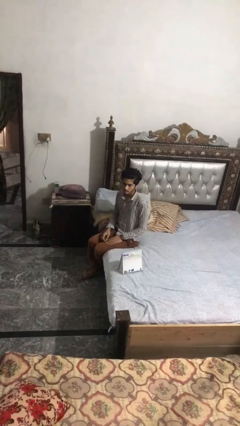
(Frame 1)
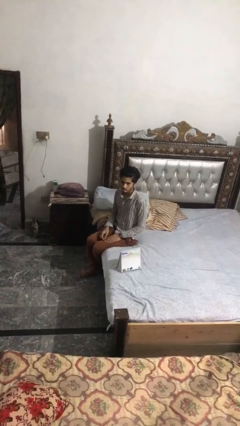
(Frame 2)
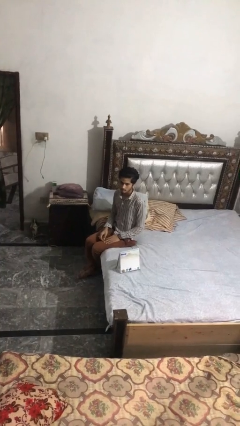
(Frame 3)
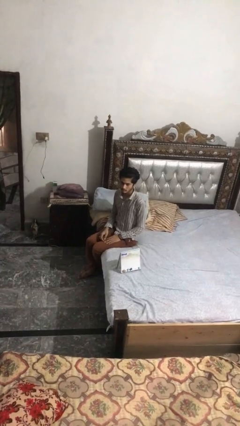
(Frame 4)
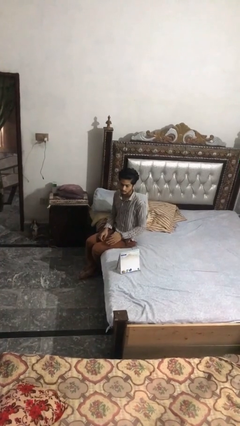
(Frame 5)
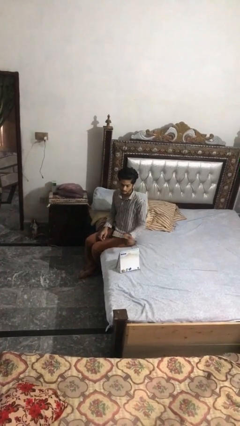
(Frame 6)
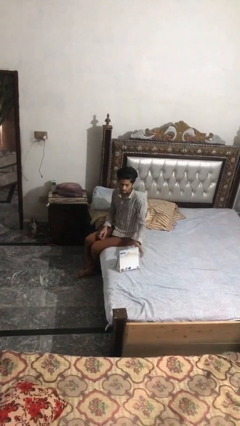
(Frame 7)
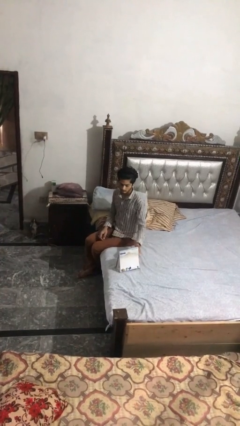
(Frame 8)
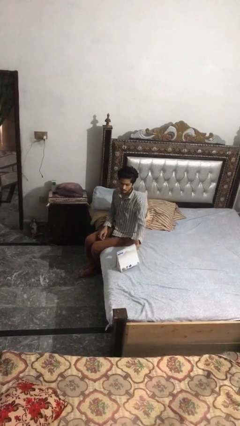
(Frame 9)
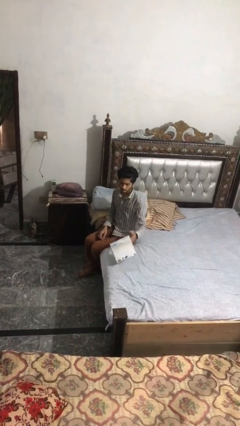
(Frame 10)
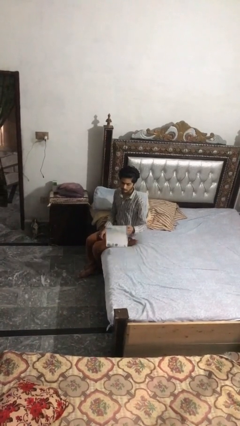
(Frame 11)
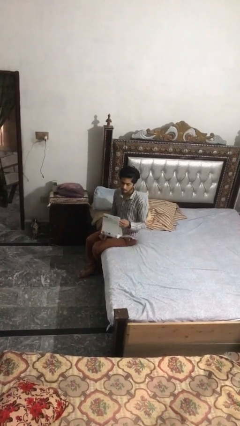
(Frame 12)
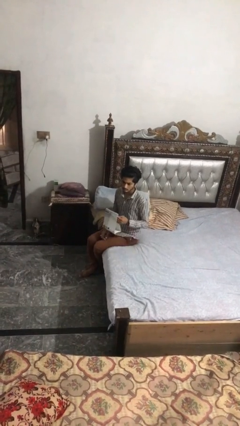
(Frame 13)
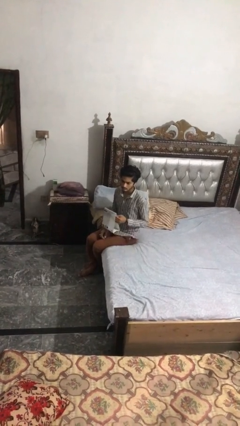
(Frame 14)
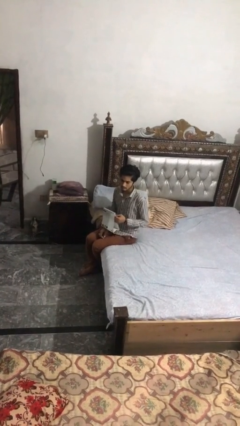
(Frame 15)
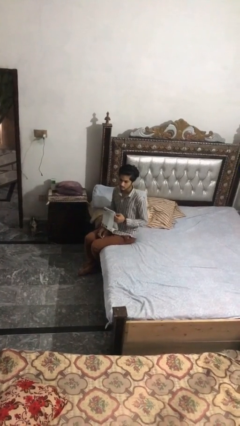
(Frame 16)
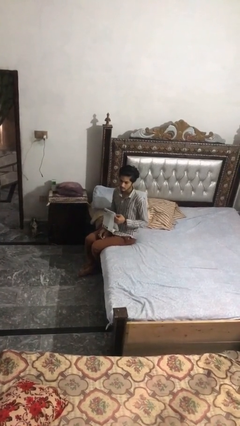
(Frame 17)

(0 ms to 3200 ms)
person picks up object from bed

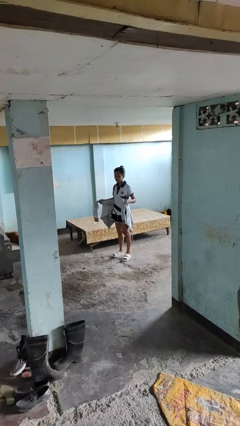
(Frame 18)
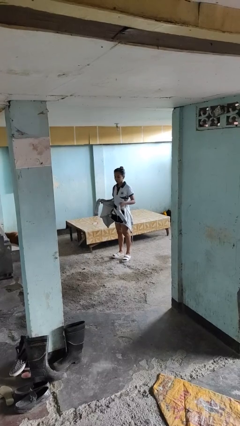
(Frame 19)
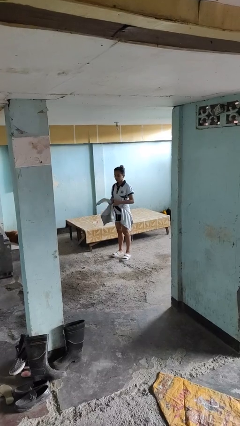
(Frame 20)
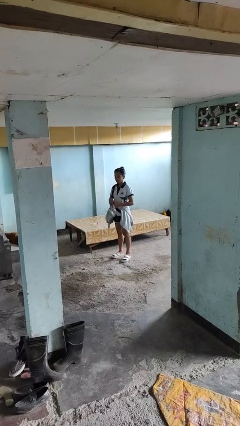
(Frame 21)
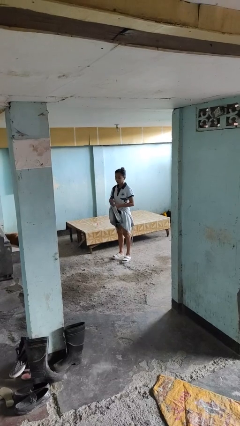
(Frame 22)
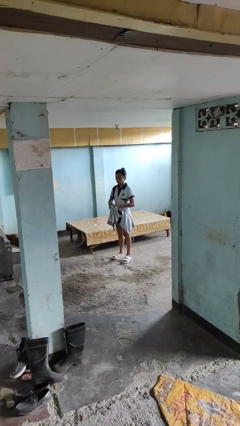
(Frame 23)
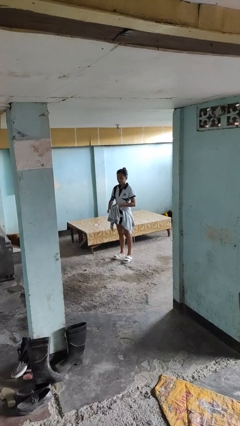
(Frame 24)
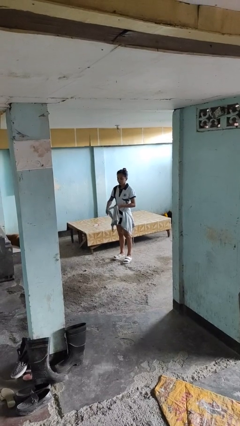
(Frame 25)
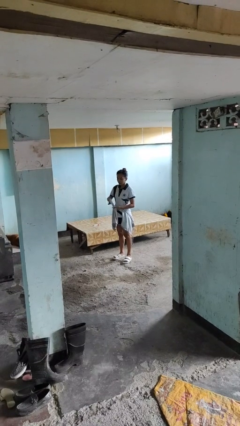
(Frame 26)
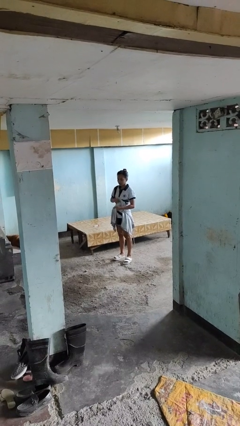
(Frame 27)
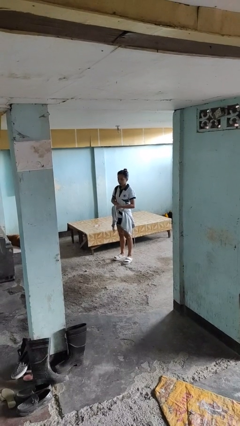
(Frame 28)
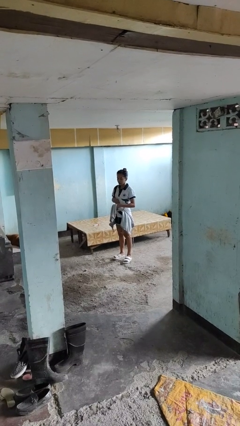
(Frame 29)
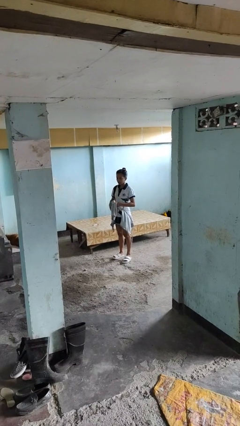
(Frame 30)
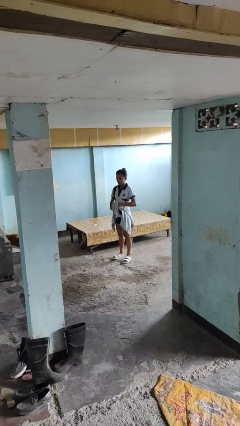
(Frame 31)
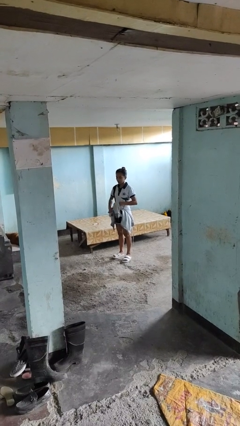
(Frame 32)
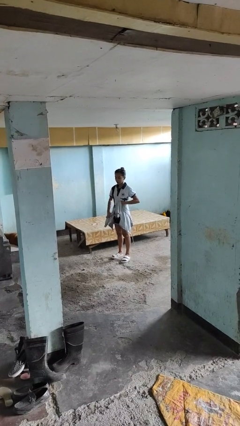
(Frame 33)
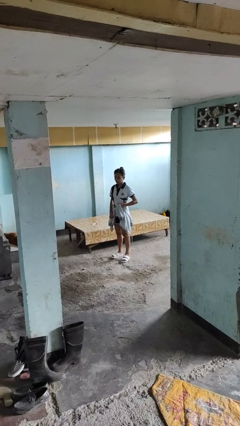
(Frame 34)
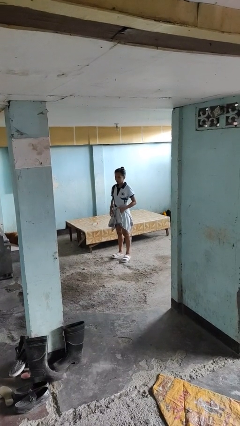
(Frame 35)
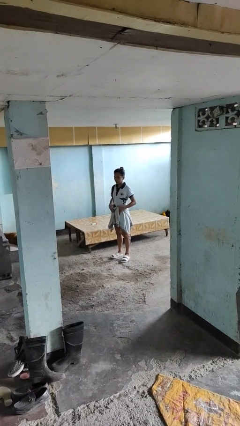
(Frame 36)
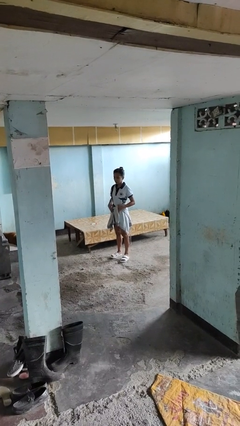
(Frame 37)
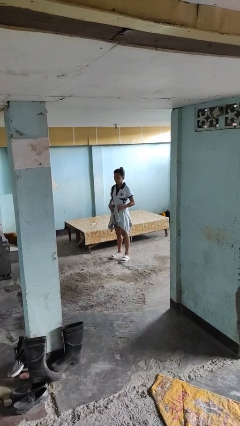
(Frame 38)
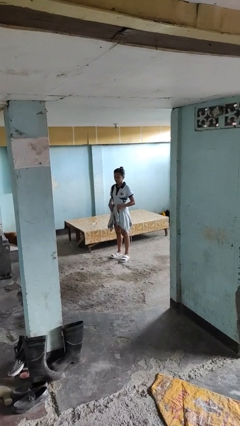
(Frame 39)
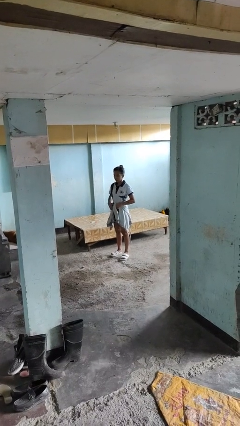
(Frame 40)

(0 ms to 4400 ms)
person ties jacket around waist

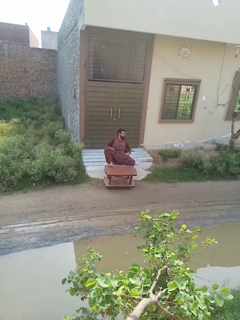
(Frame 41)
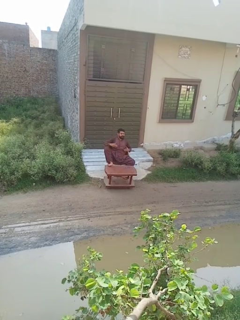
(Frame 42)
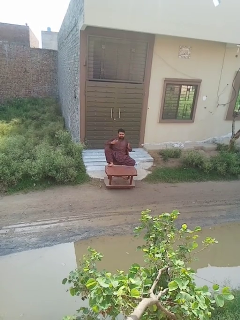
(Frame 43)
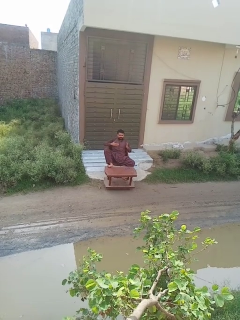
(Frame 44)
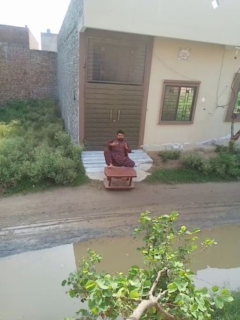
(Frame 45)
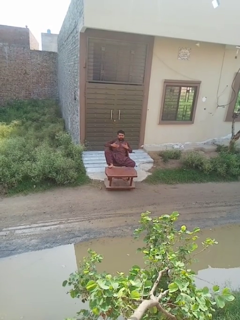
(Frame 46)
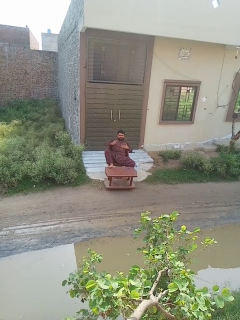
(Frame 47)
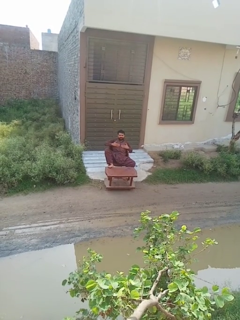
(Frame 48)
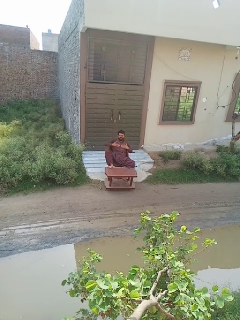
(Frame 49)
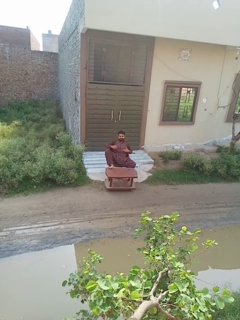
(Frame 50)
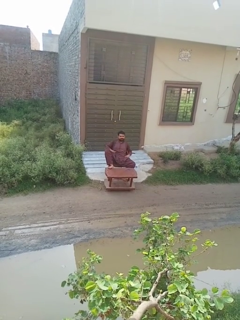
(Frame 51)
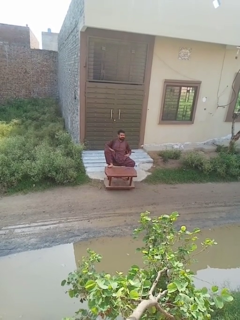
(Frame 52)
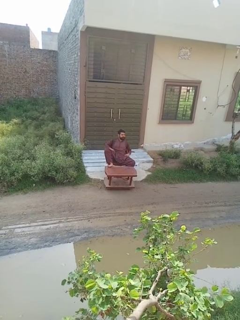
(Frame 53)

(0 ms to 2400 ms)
person drums on chest

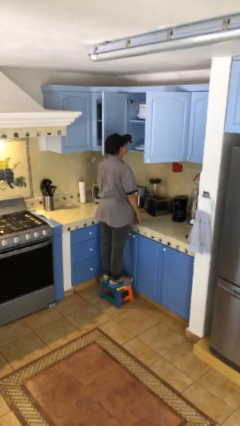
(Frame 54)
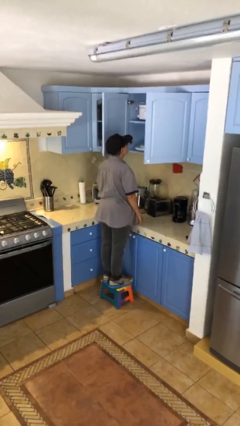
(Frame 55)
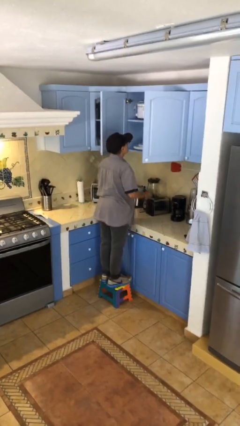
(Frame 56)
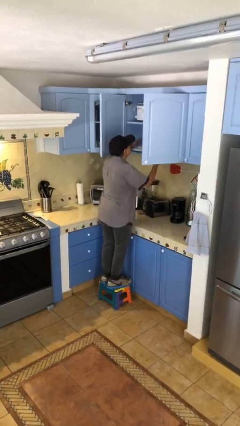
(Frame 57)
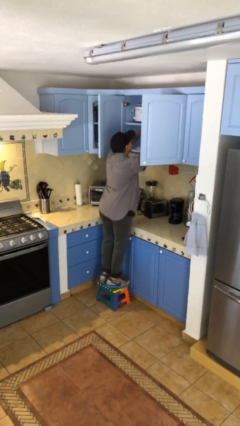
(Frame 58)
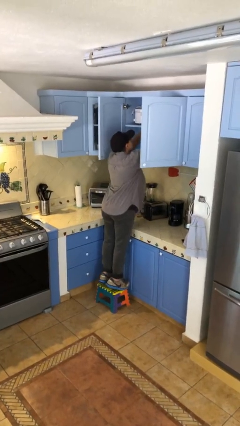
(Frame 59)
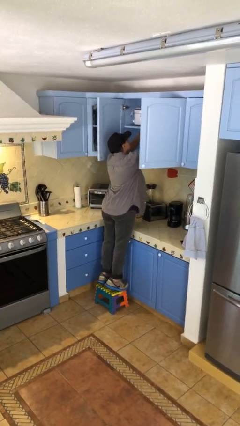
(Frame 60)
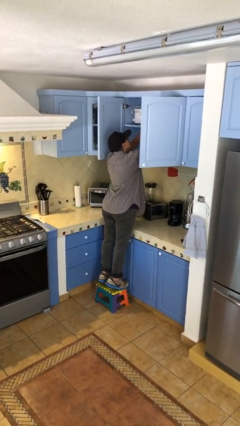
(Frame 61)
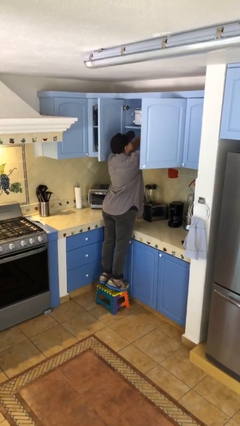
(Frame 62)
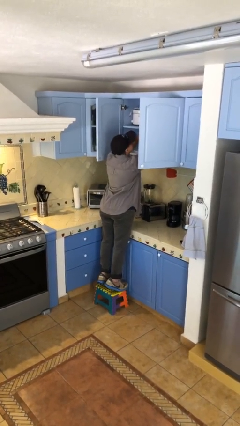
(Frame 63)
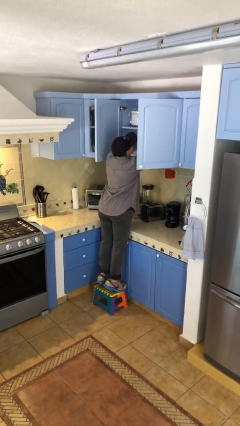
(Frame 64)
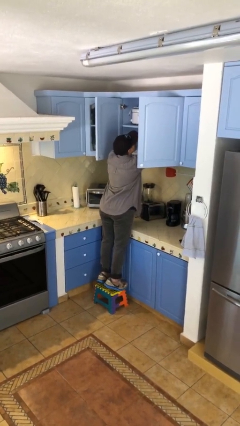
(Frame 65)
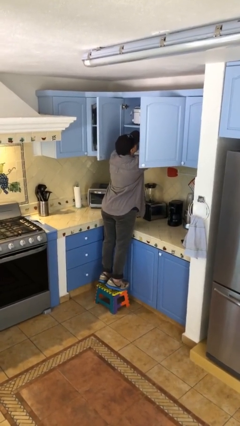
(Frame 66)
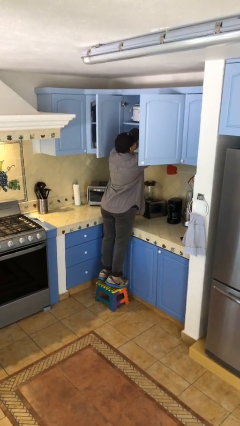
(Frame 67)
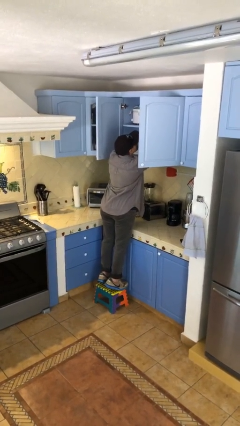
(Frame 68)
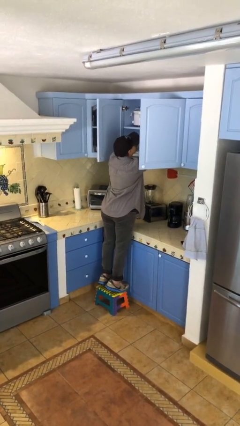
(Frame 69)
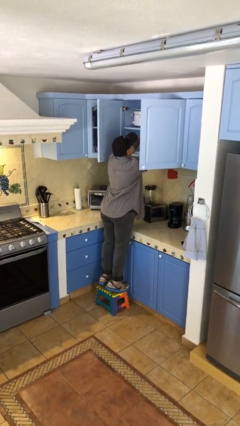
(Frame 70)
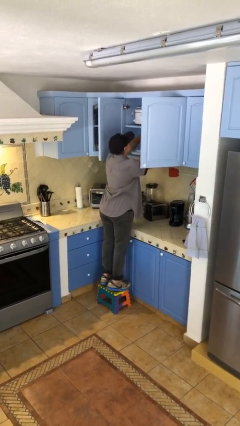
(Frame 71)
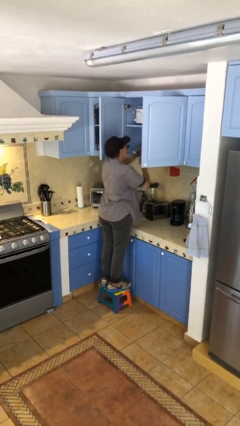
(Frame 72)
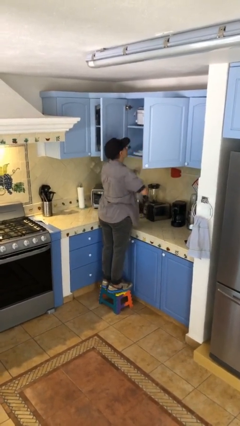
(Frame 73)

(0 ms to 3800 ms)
person searches in cabinet

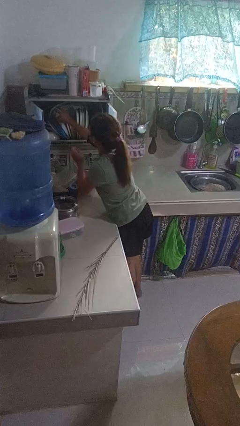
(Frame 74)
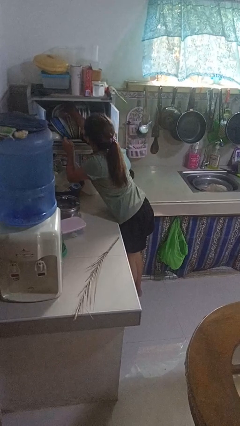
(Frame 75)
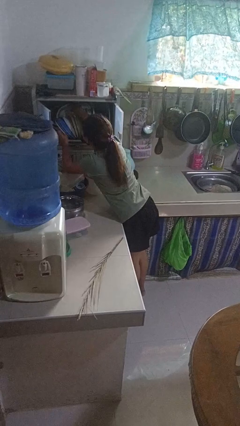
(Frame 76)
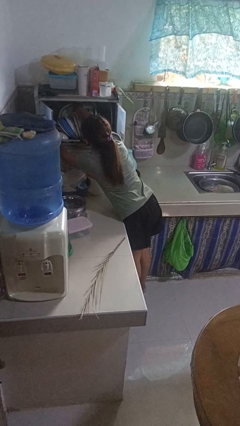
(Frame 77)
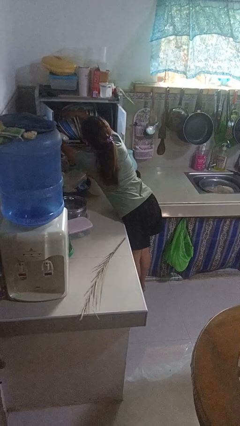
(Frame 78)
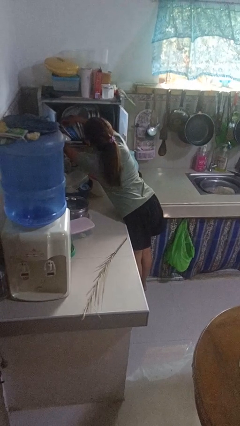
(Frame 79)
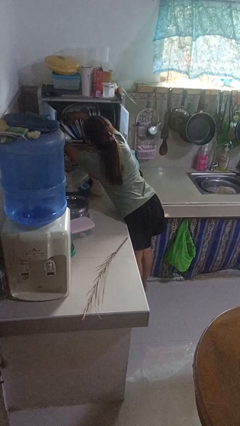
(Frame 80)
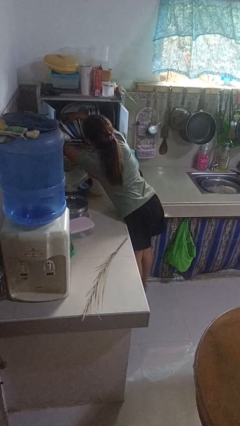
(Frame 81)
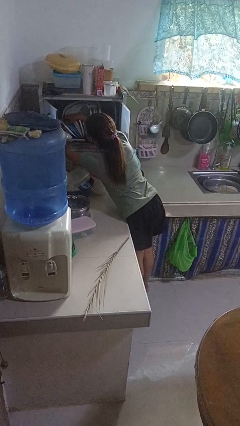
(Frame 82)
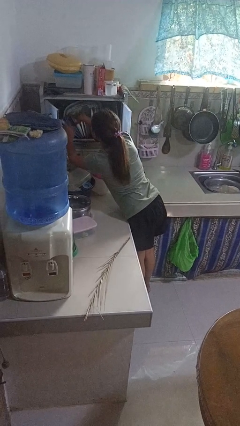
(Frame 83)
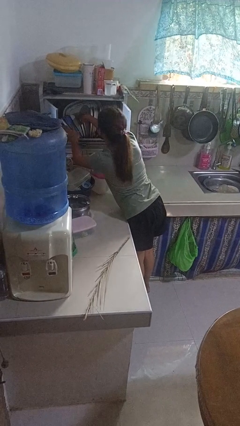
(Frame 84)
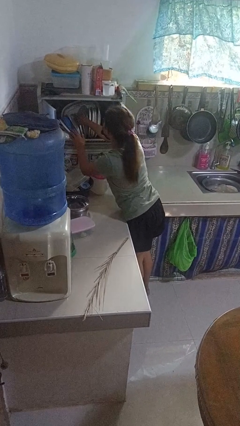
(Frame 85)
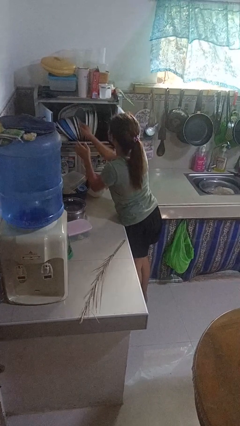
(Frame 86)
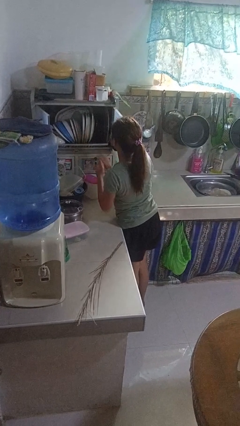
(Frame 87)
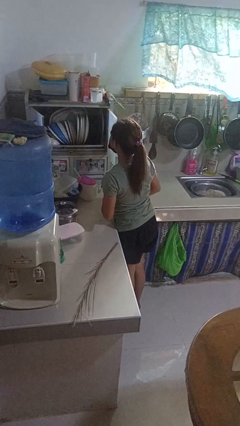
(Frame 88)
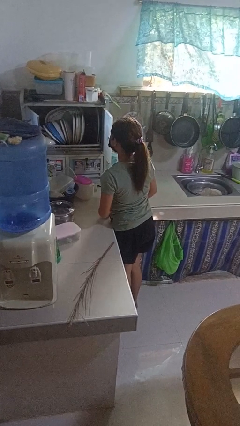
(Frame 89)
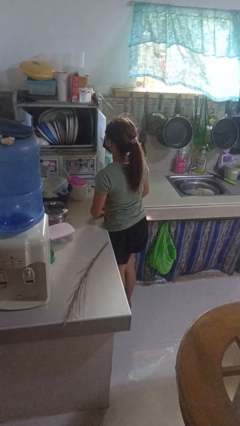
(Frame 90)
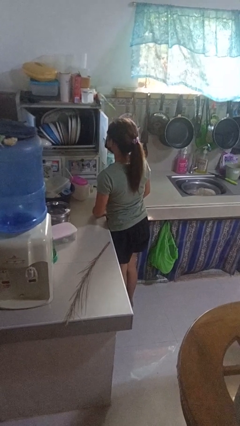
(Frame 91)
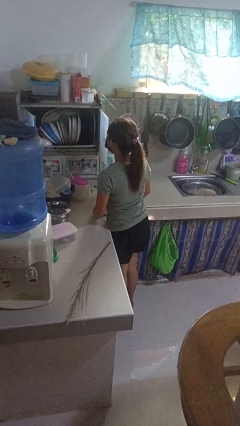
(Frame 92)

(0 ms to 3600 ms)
person searches in kitchen drawer

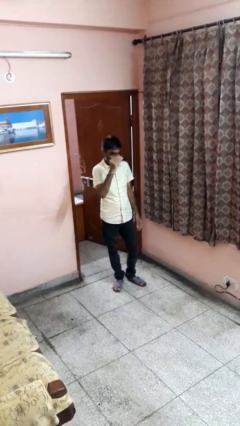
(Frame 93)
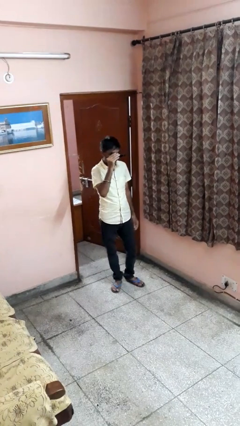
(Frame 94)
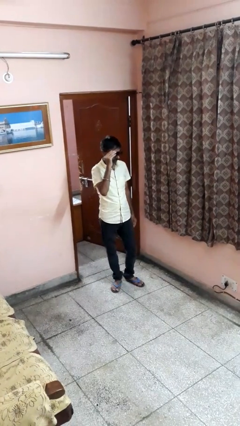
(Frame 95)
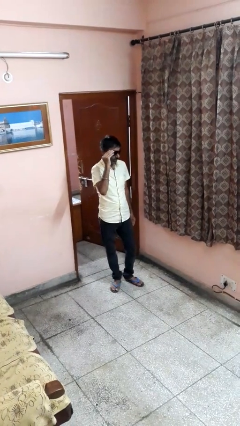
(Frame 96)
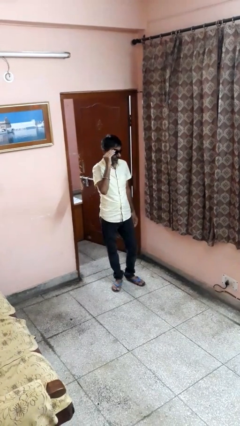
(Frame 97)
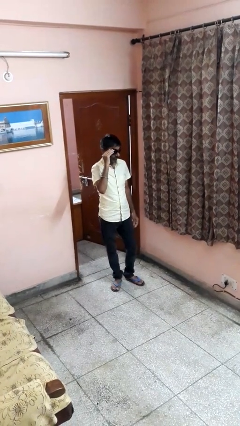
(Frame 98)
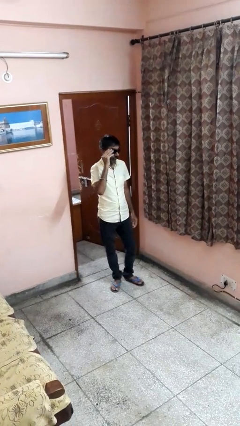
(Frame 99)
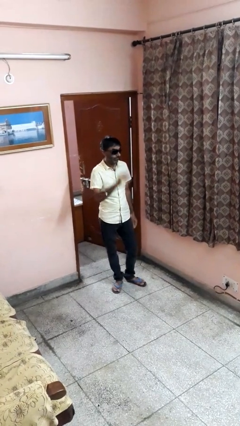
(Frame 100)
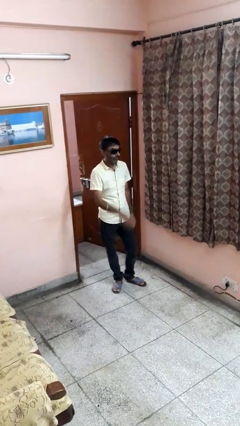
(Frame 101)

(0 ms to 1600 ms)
person puts on sunglasses
